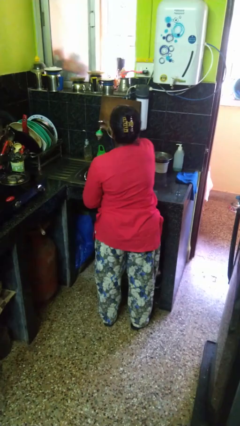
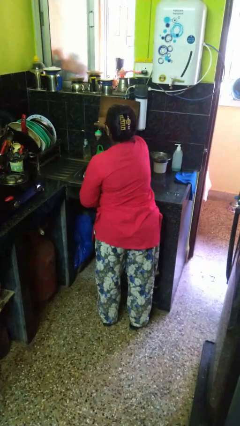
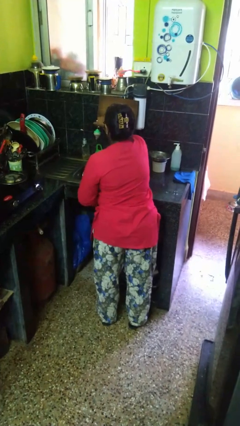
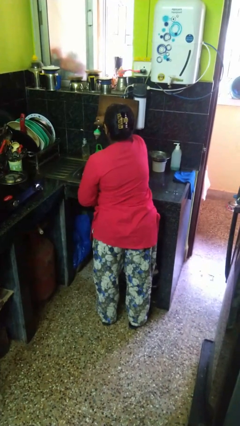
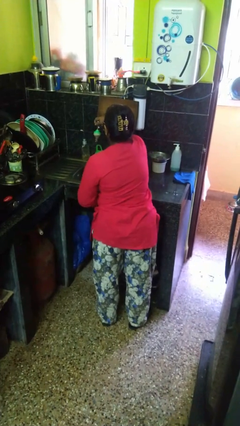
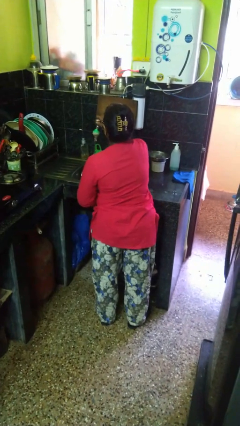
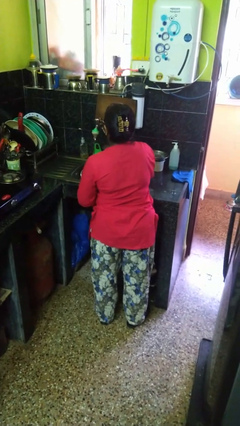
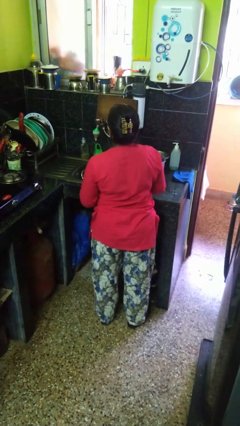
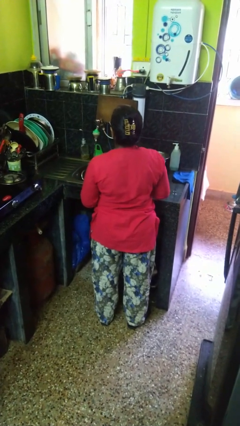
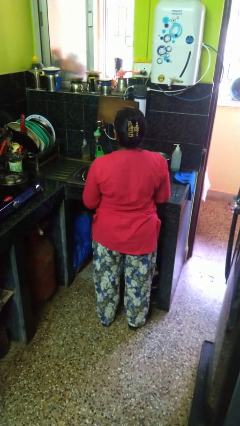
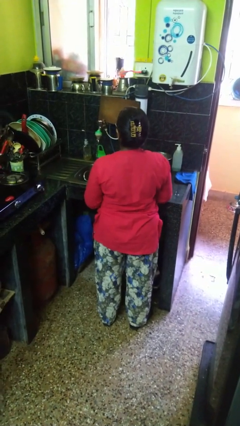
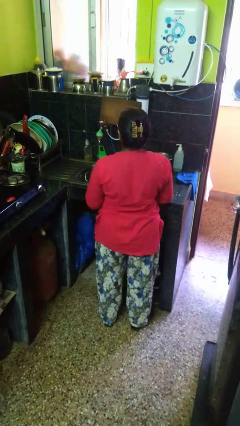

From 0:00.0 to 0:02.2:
person turns on faucet

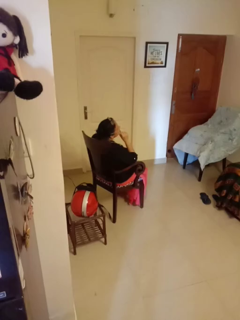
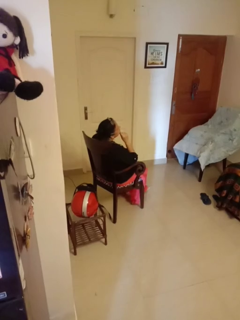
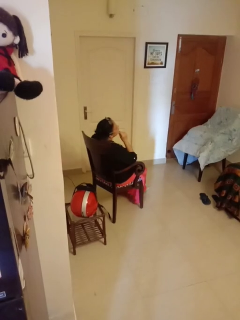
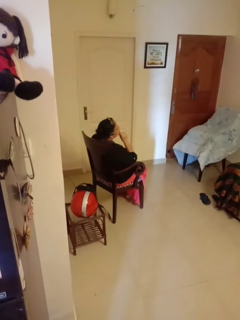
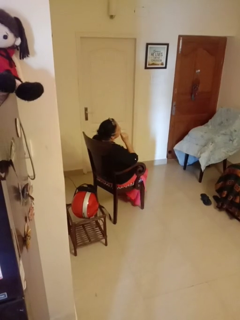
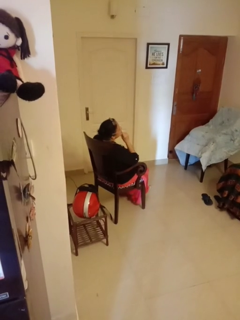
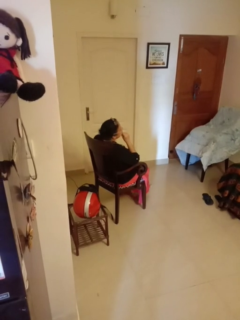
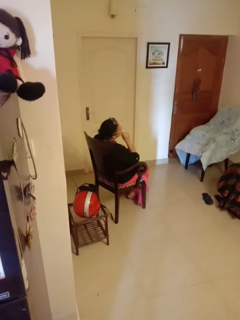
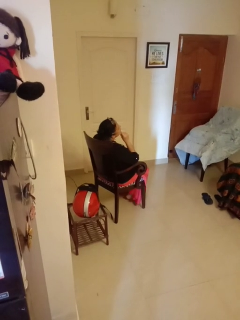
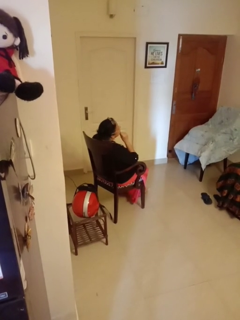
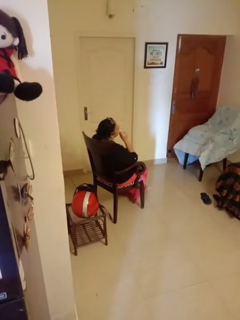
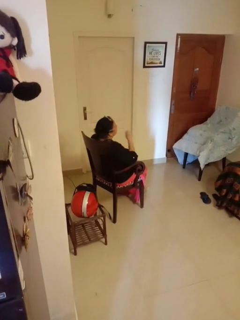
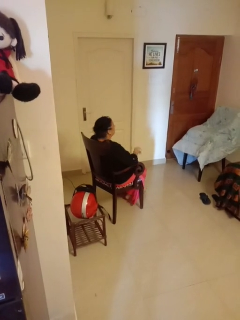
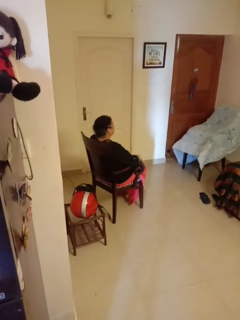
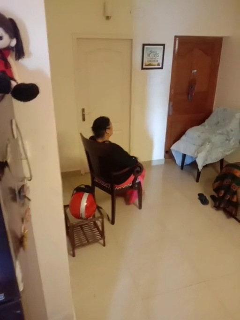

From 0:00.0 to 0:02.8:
person strokes chin

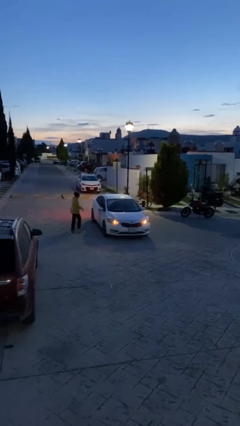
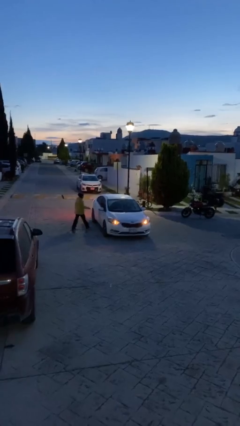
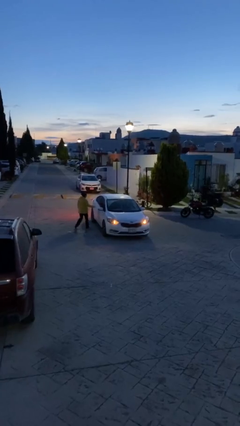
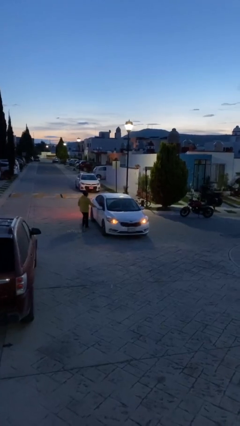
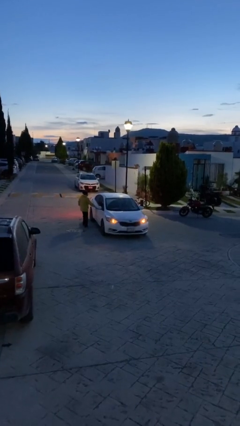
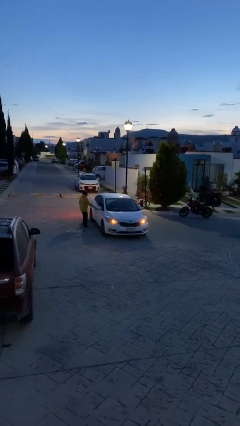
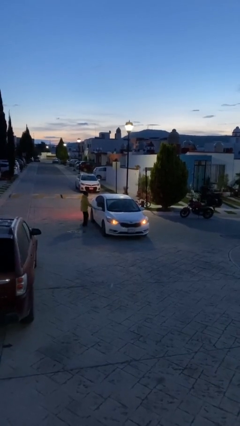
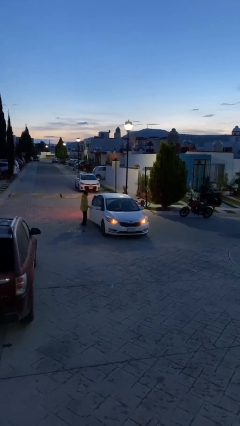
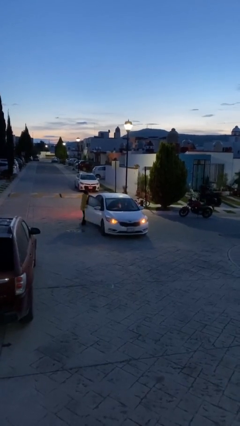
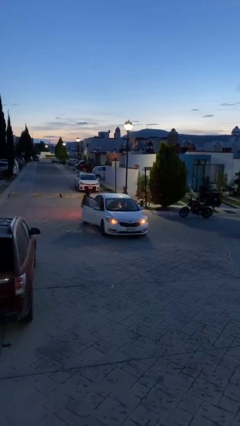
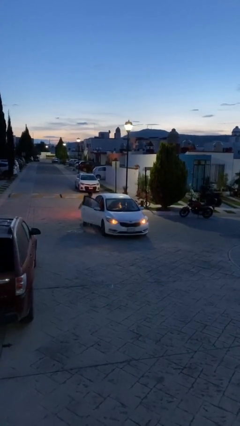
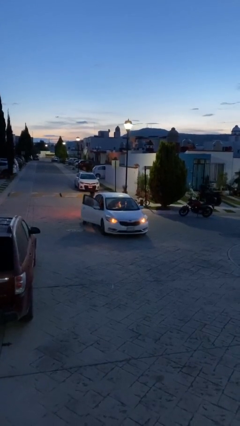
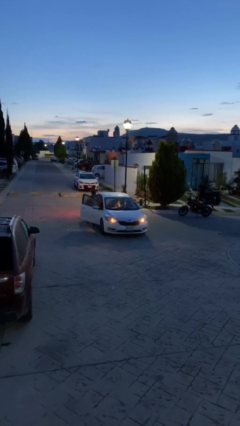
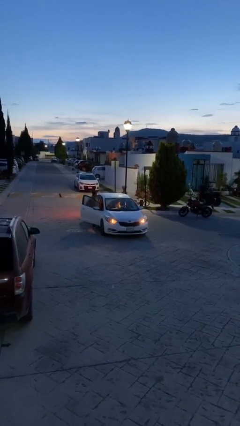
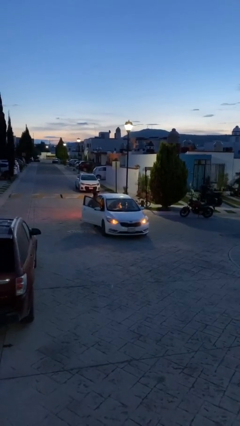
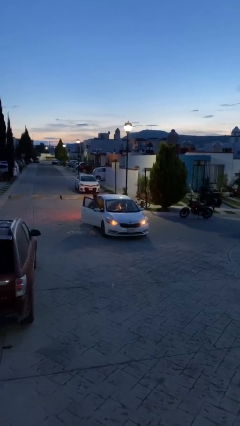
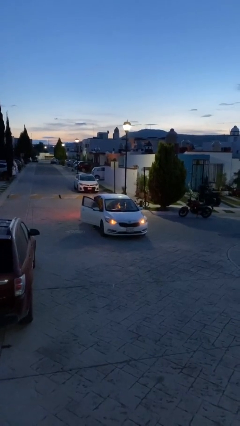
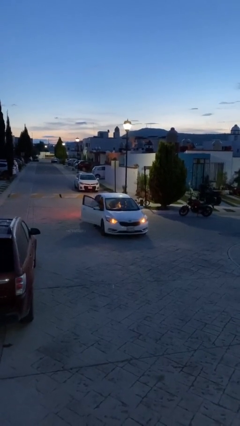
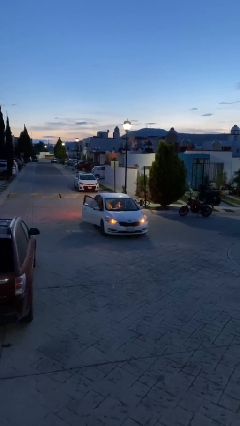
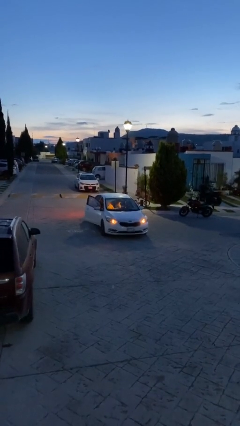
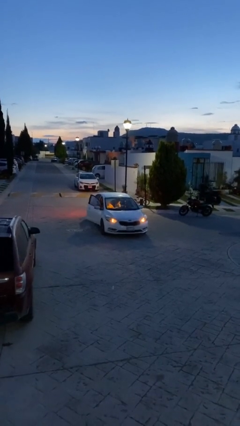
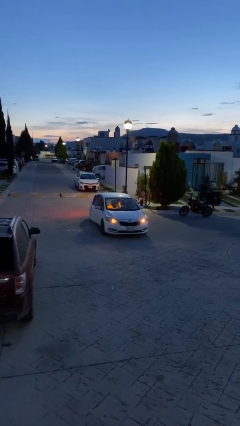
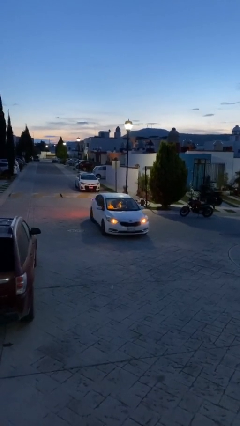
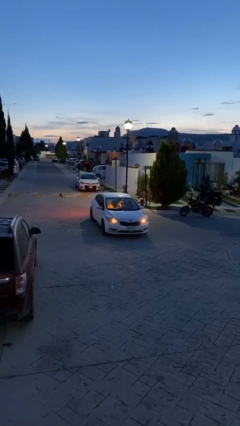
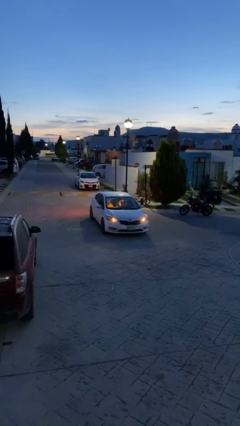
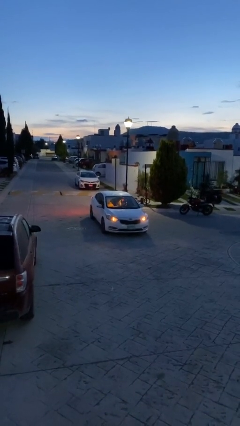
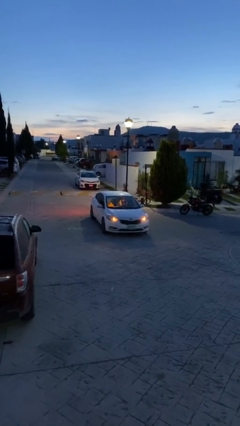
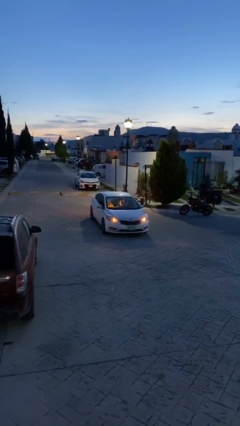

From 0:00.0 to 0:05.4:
car picks up person

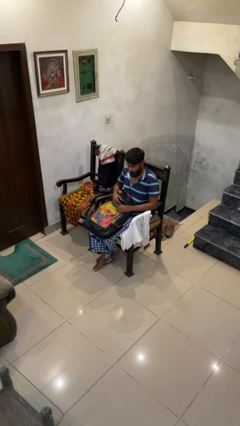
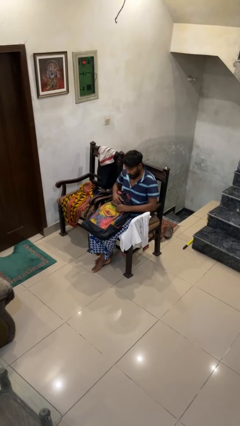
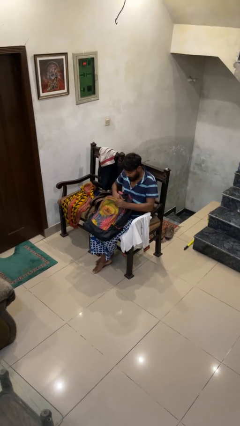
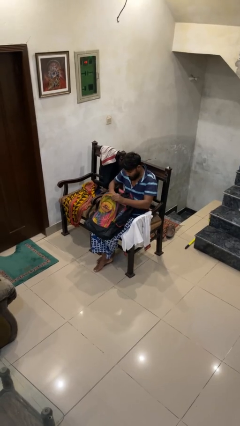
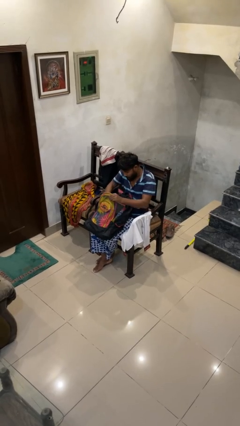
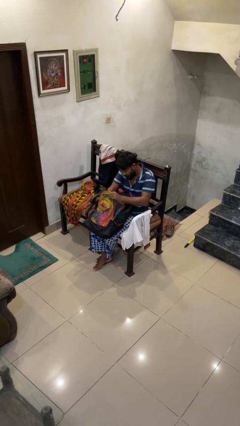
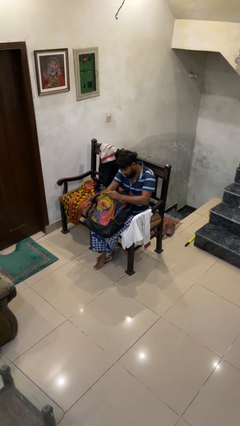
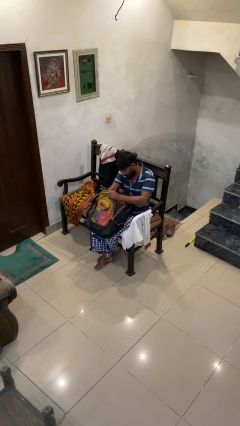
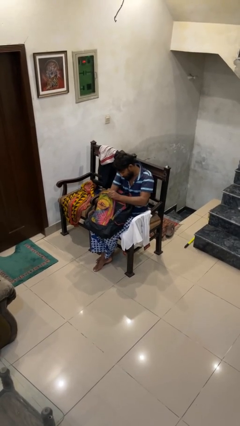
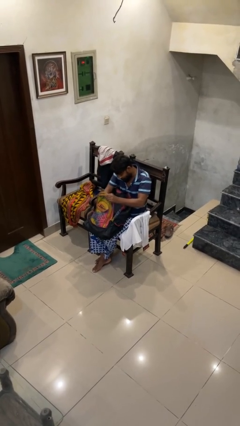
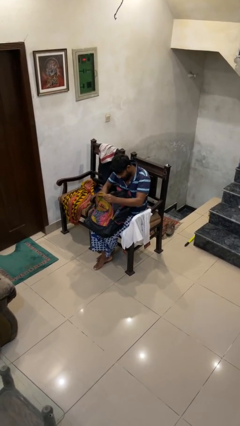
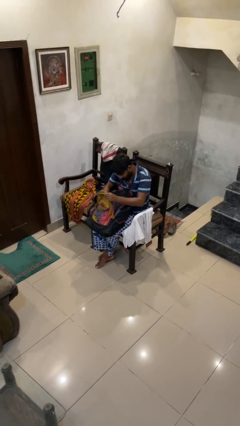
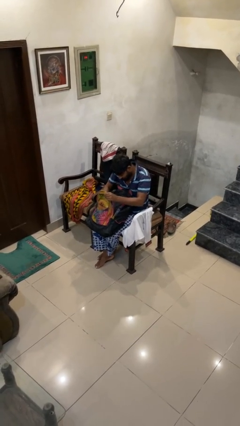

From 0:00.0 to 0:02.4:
person searches in backpack

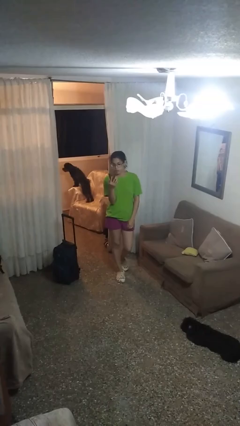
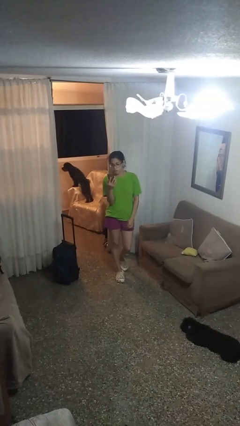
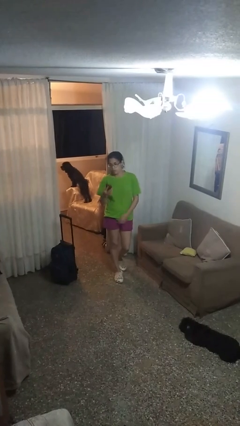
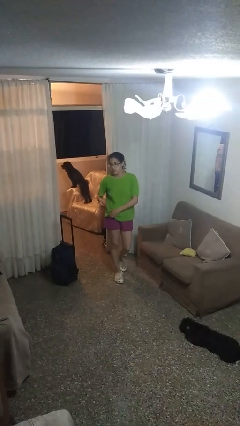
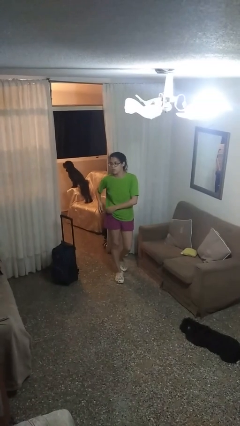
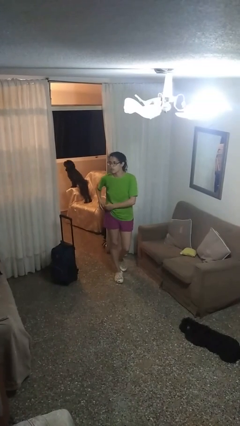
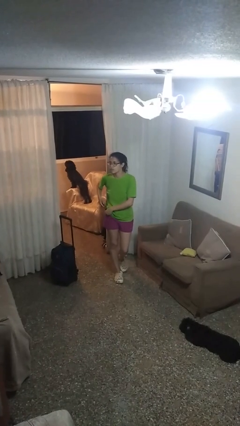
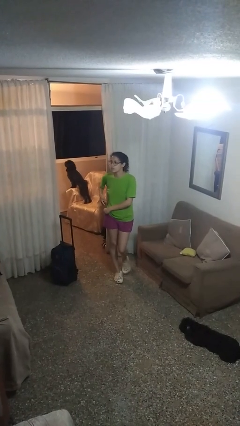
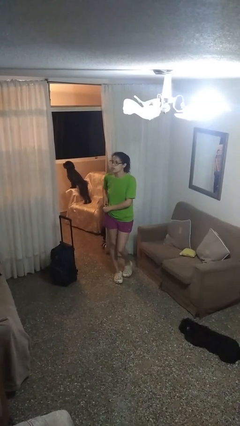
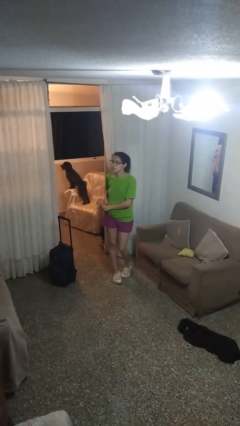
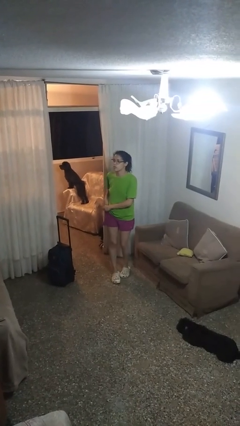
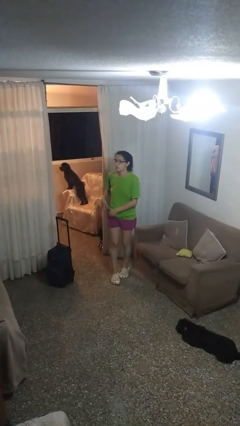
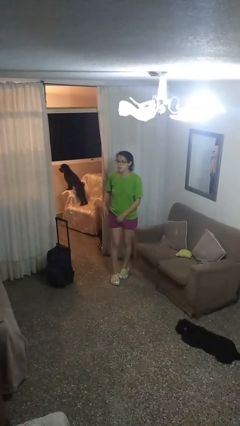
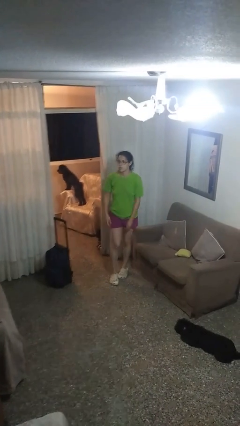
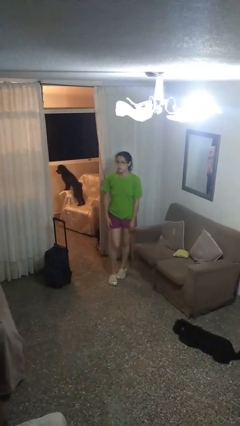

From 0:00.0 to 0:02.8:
person puts phone into pocket

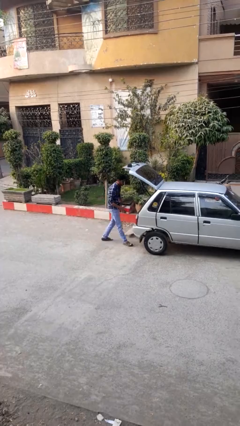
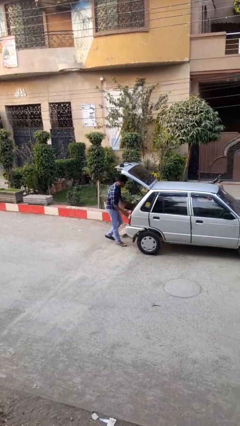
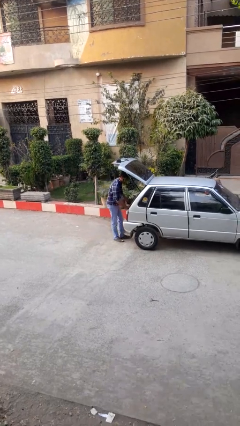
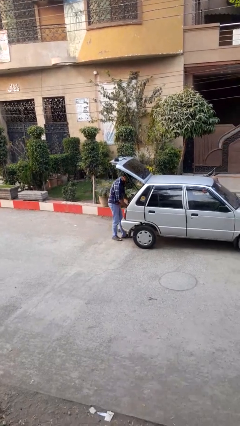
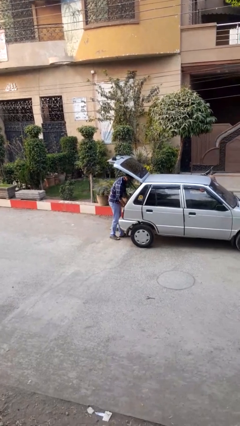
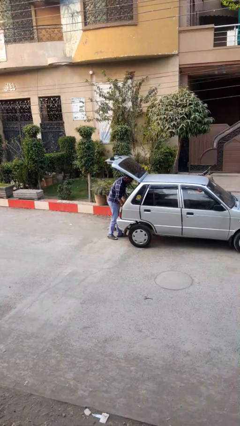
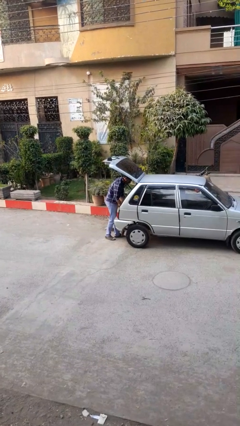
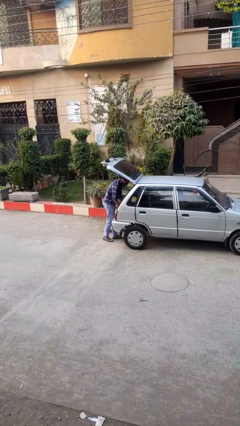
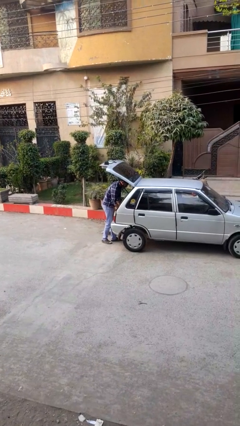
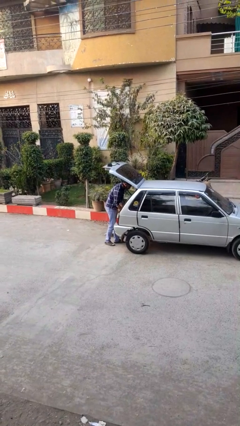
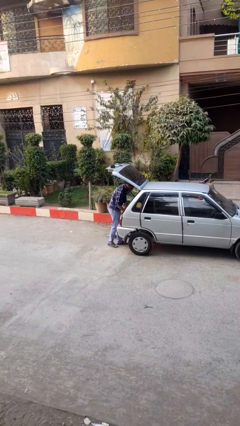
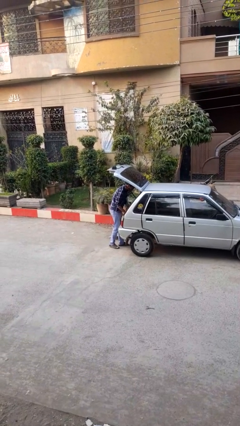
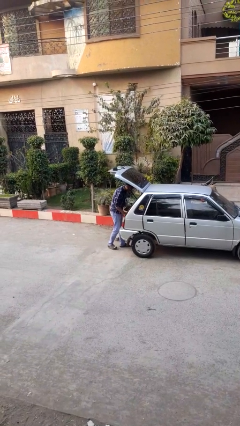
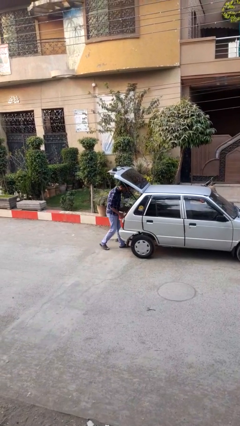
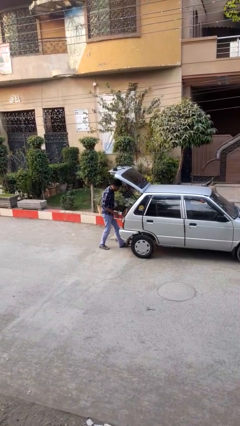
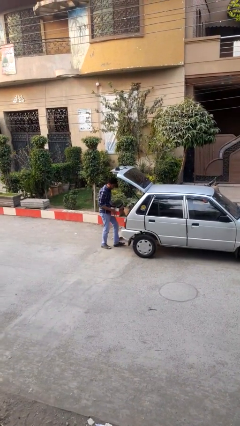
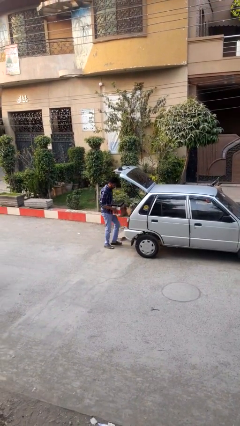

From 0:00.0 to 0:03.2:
person loads car
